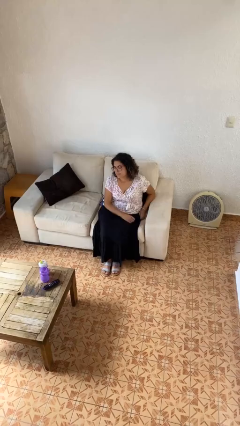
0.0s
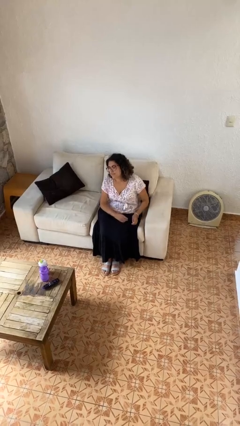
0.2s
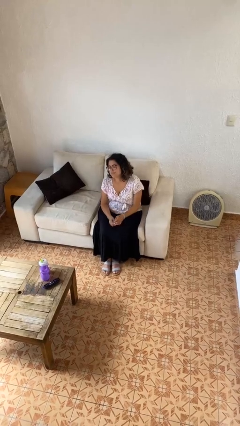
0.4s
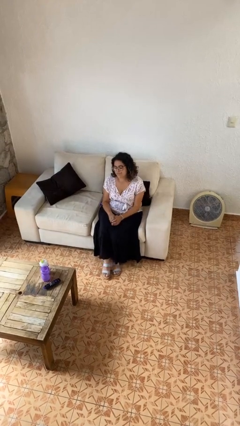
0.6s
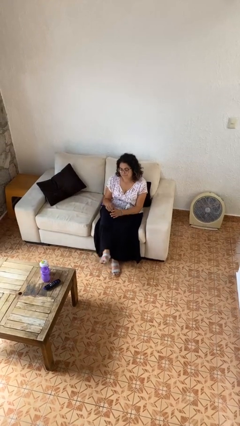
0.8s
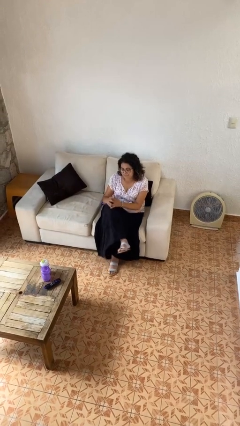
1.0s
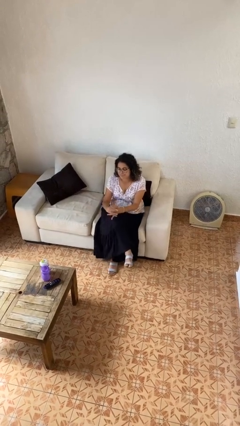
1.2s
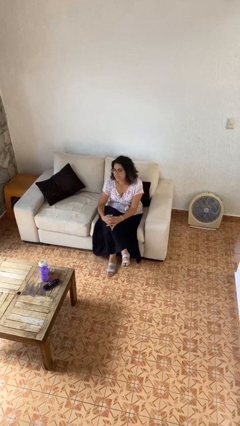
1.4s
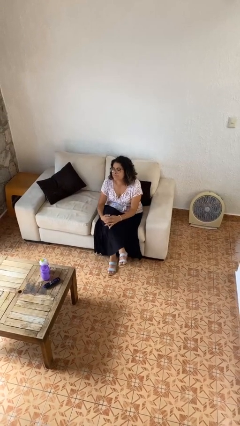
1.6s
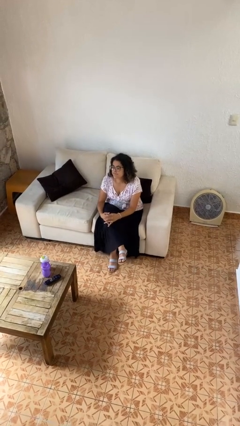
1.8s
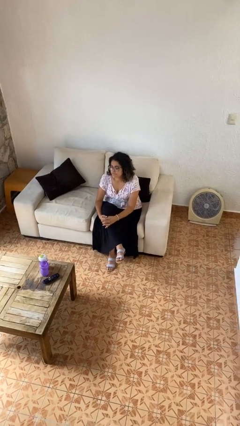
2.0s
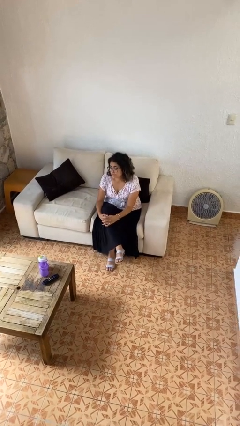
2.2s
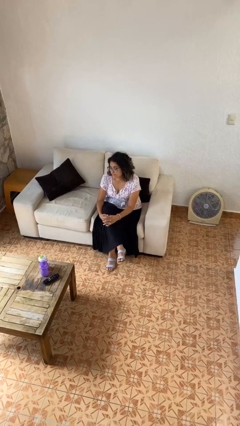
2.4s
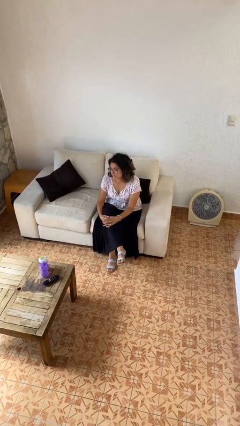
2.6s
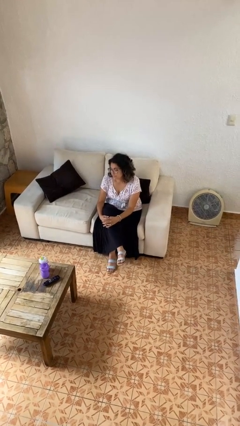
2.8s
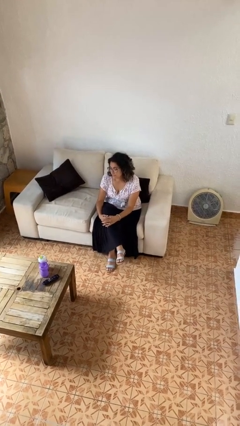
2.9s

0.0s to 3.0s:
person crosses legs

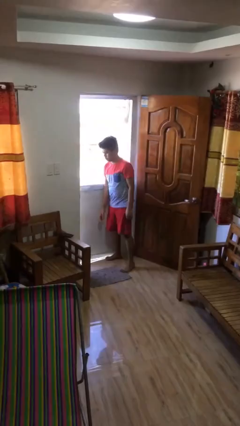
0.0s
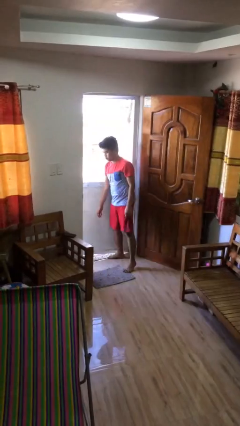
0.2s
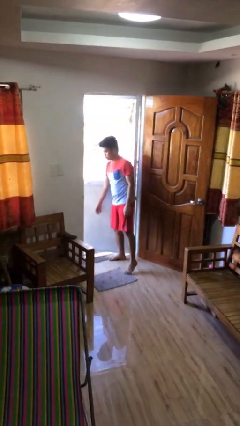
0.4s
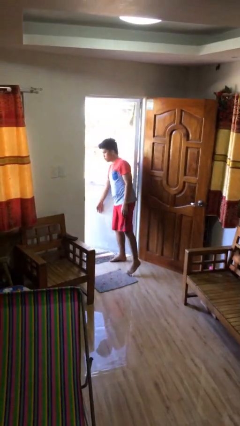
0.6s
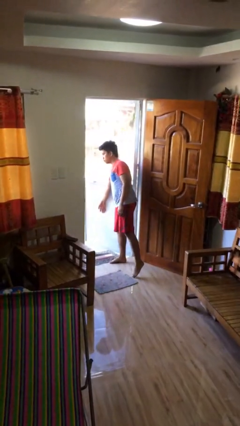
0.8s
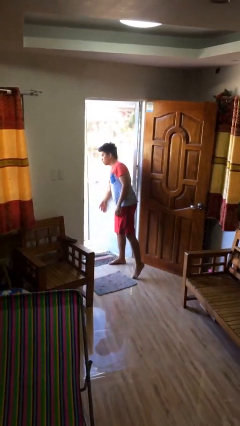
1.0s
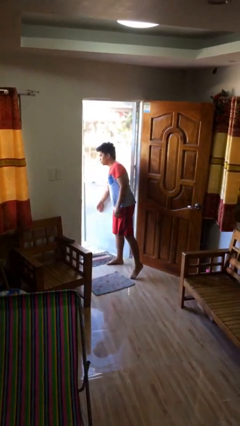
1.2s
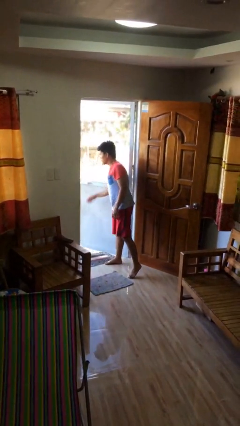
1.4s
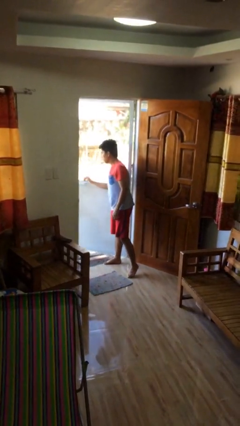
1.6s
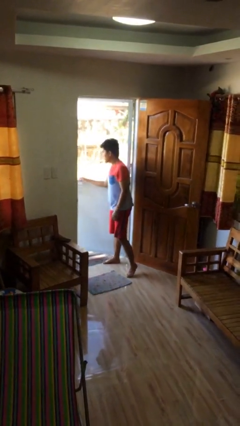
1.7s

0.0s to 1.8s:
person opens facility door

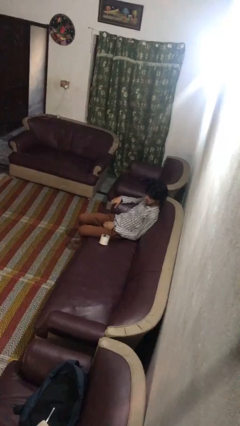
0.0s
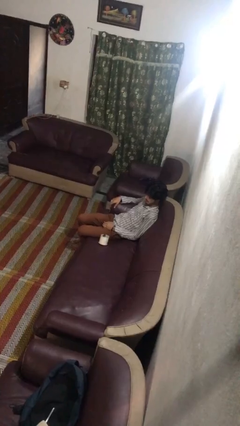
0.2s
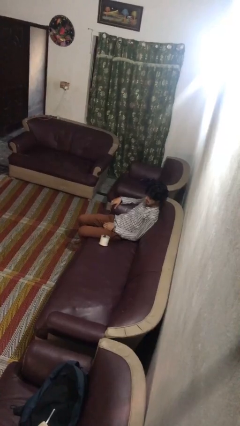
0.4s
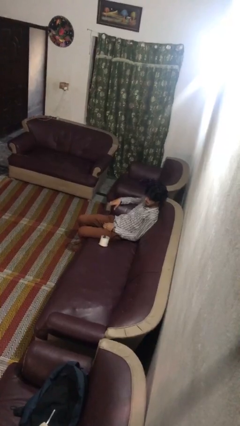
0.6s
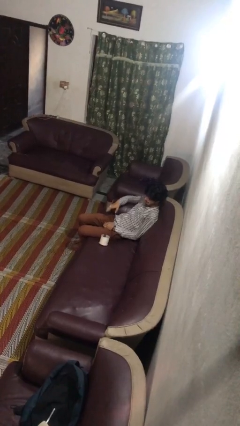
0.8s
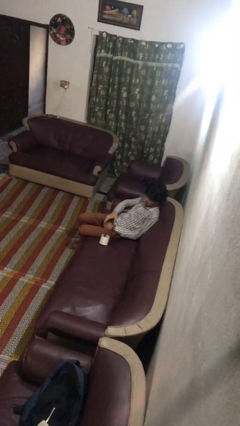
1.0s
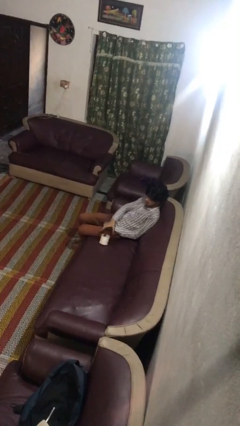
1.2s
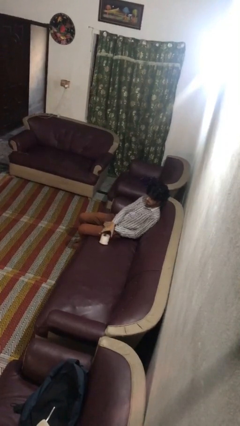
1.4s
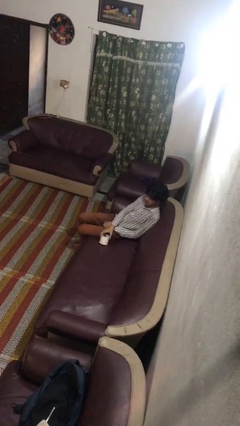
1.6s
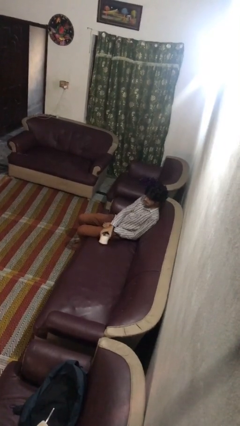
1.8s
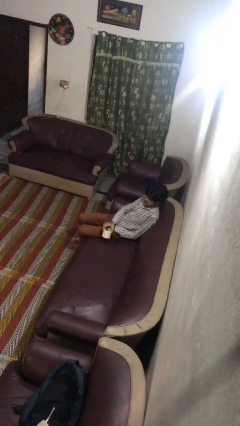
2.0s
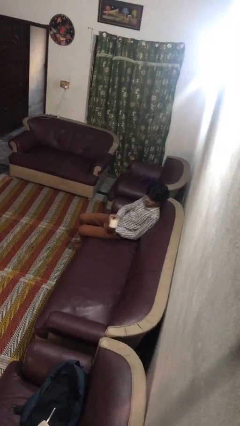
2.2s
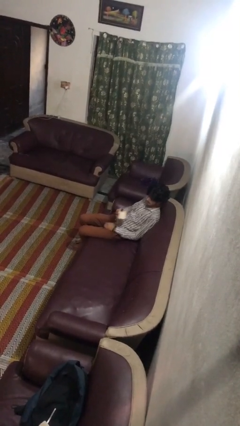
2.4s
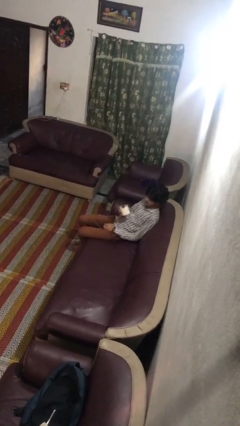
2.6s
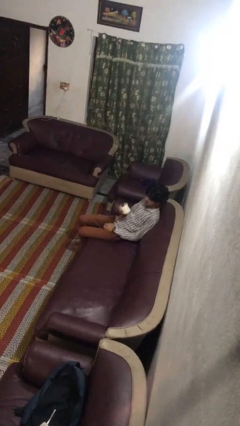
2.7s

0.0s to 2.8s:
person picks up object from couch

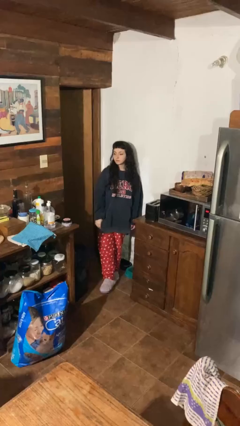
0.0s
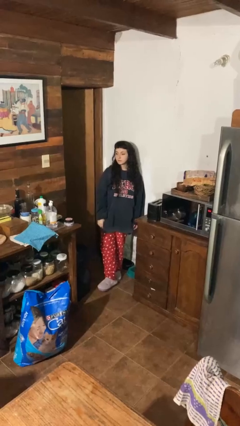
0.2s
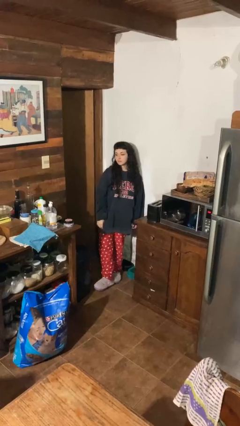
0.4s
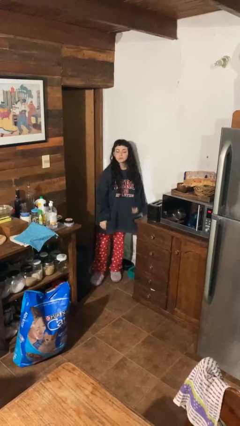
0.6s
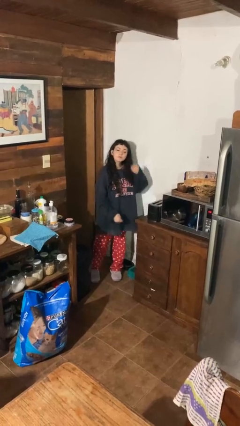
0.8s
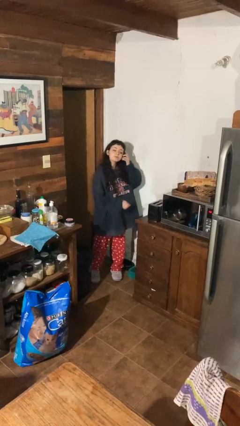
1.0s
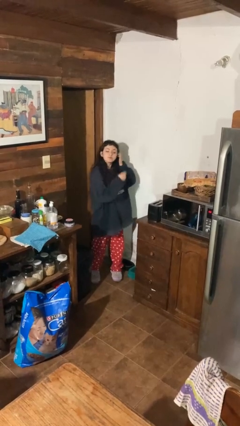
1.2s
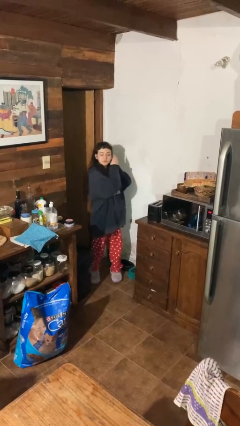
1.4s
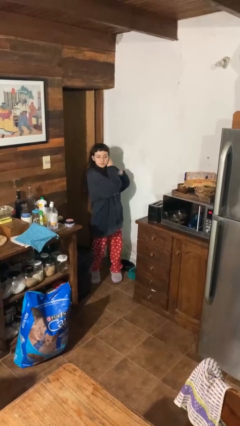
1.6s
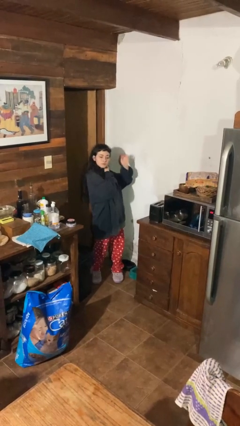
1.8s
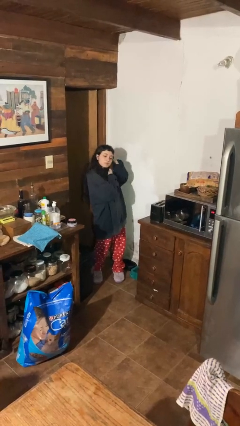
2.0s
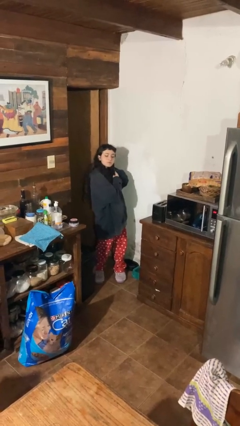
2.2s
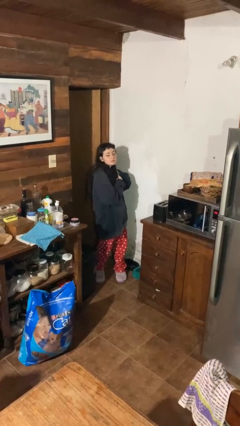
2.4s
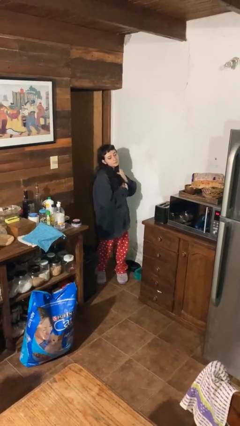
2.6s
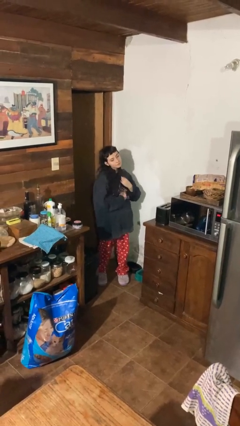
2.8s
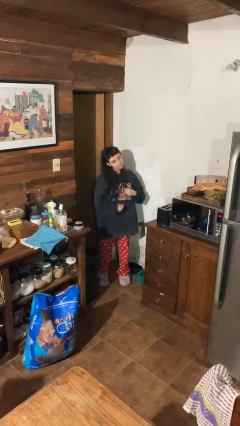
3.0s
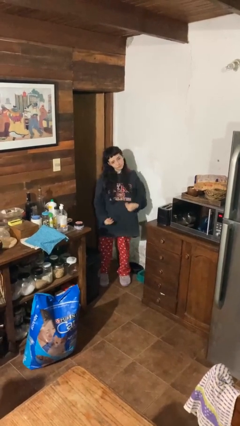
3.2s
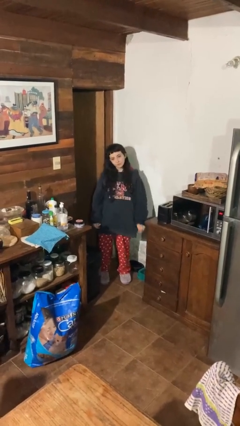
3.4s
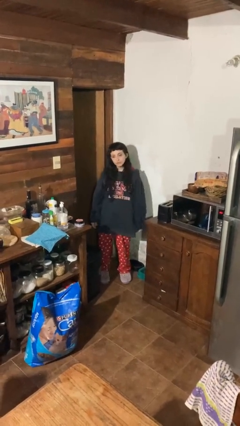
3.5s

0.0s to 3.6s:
person strokes hair

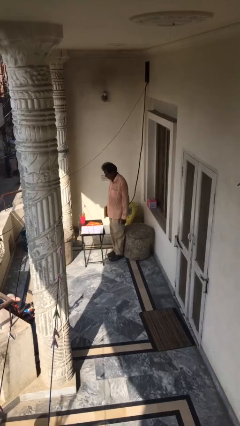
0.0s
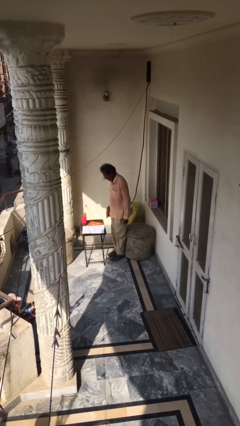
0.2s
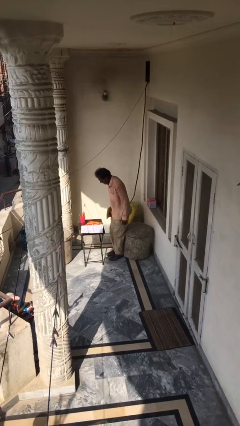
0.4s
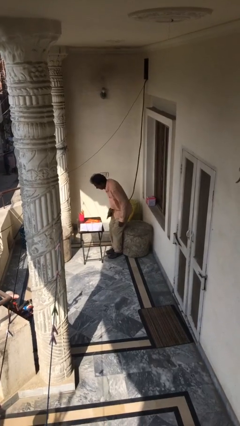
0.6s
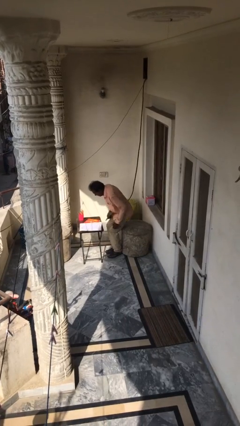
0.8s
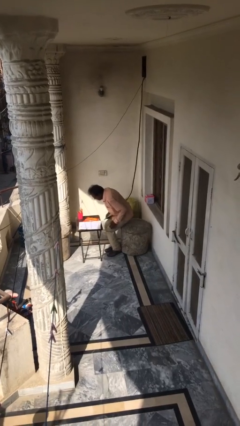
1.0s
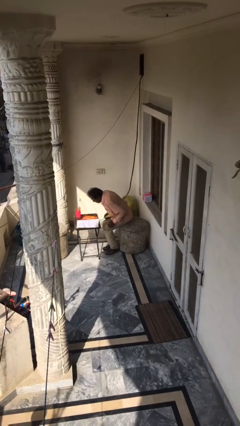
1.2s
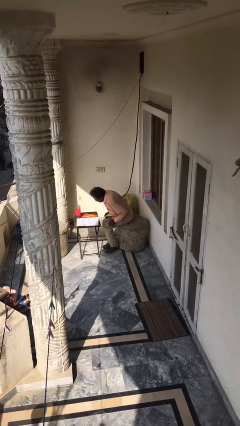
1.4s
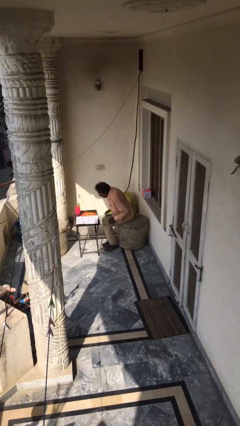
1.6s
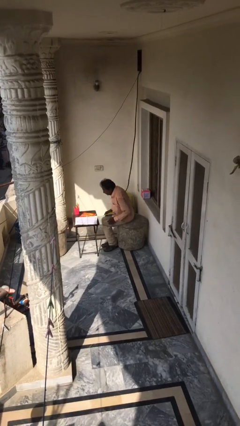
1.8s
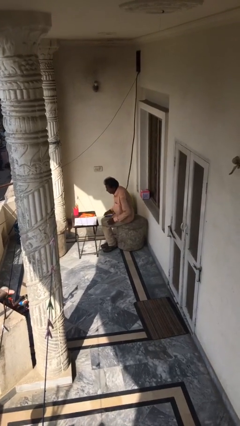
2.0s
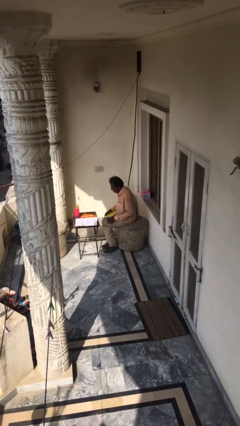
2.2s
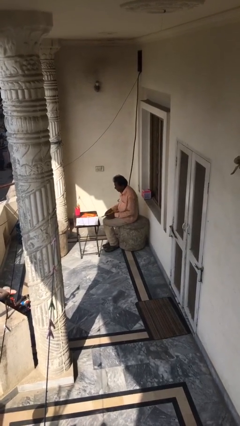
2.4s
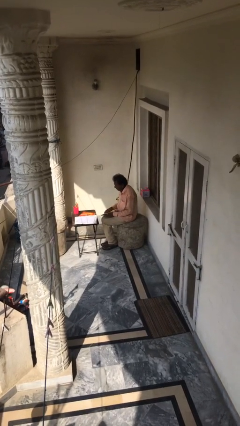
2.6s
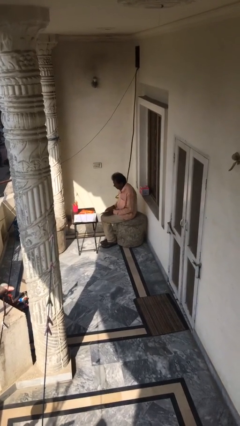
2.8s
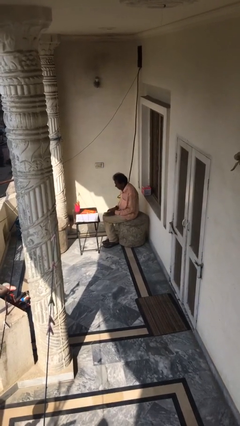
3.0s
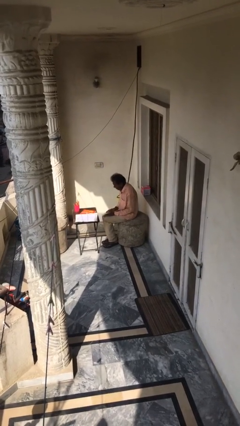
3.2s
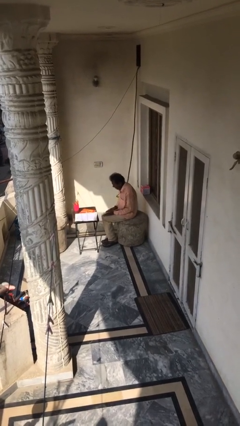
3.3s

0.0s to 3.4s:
person sits down

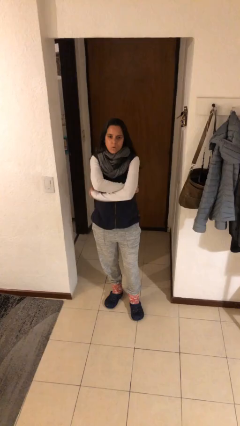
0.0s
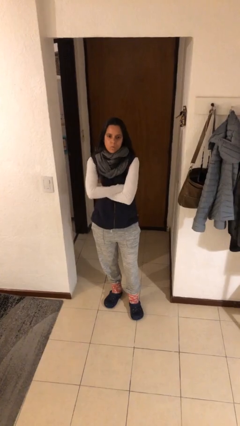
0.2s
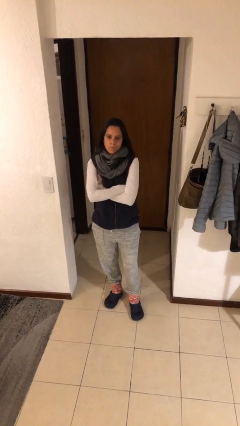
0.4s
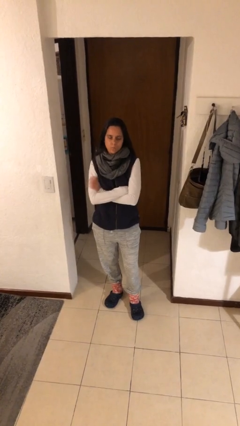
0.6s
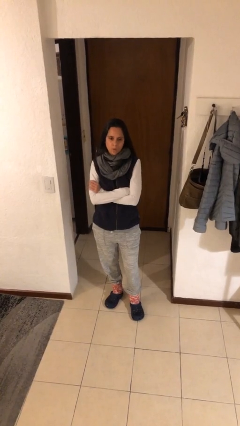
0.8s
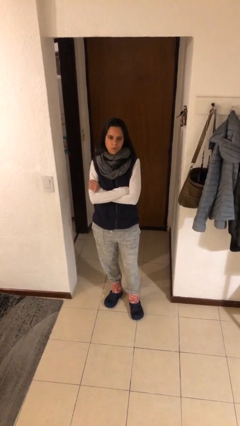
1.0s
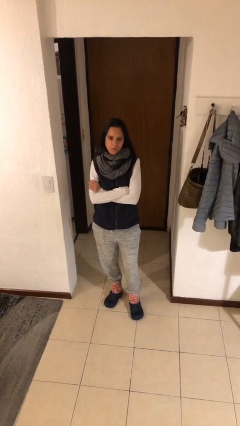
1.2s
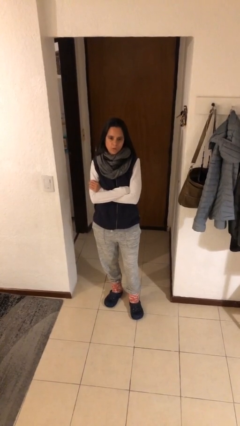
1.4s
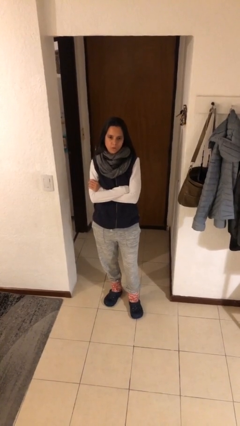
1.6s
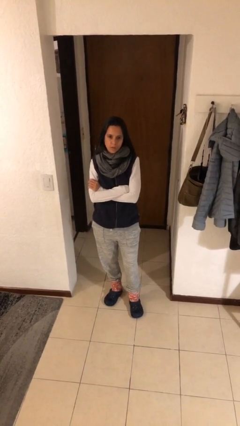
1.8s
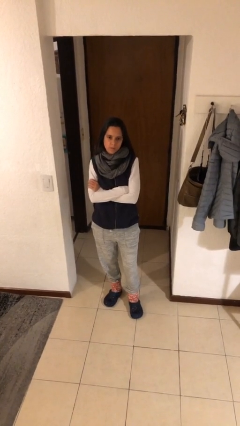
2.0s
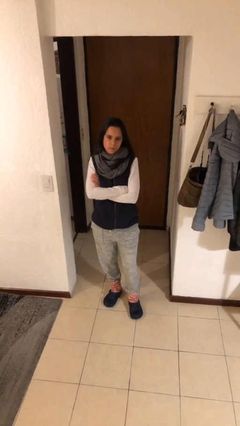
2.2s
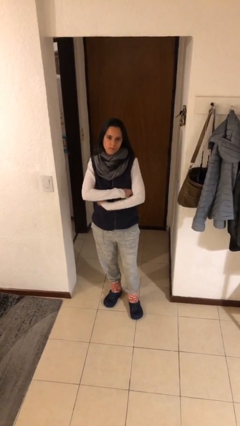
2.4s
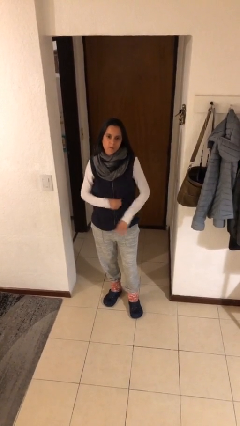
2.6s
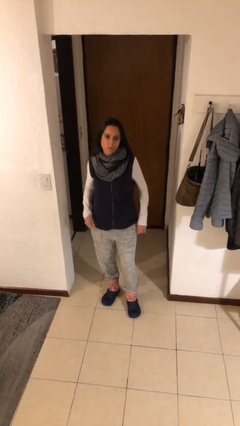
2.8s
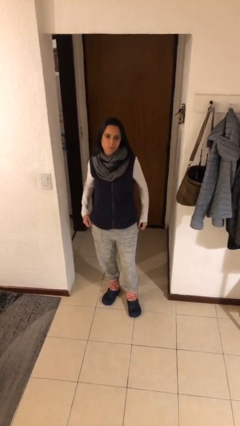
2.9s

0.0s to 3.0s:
person crosses arms
